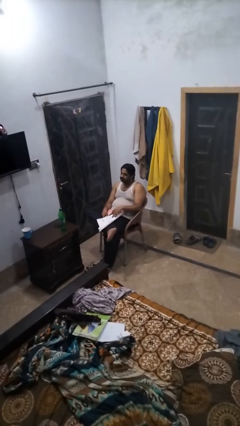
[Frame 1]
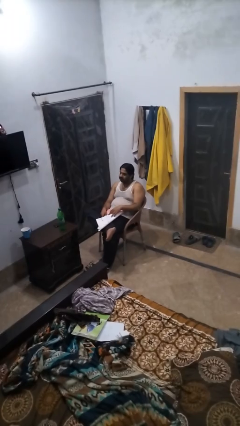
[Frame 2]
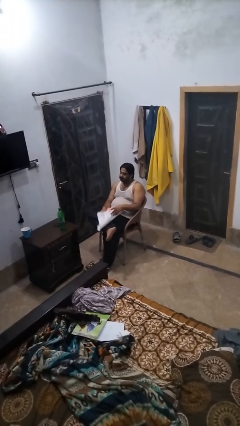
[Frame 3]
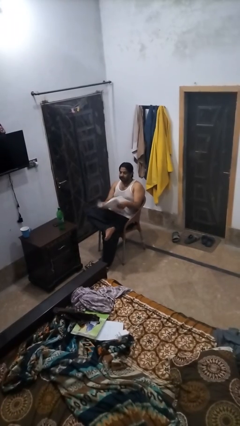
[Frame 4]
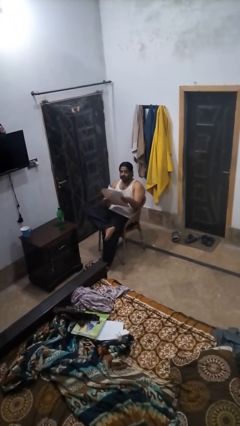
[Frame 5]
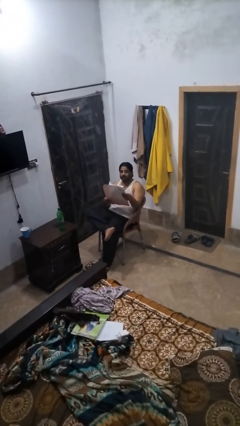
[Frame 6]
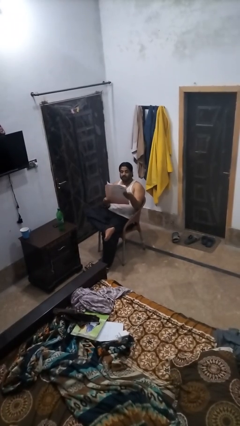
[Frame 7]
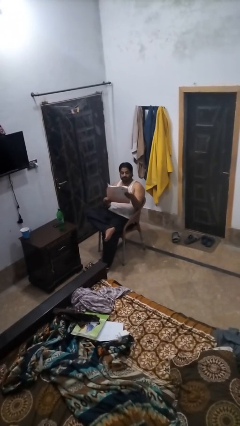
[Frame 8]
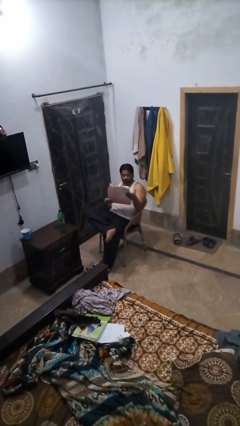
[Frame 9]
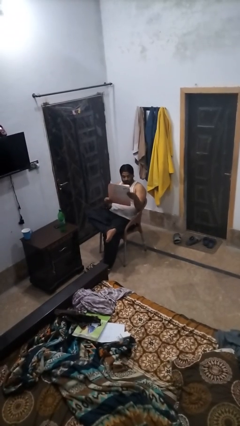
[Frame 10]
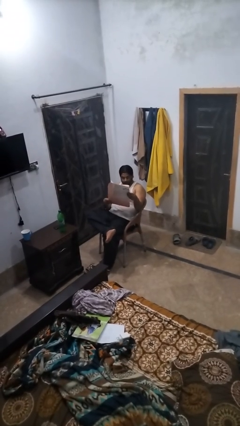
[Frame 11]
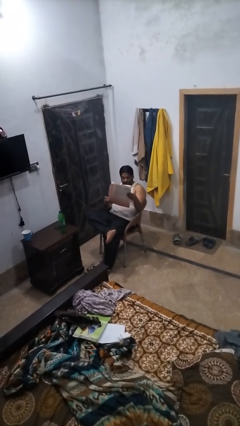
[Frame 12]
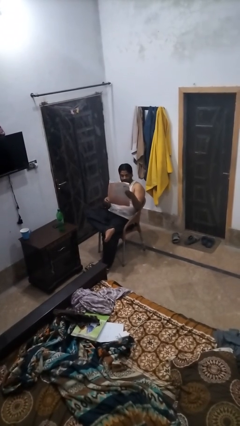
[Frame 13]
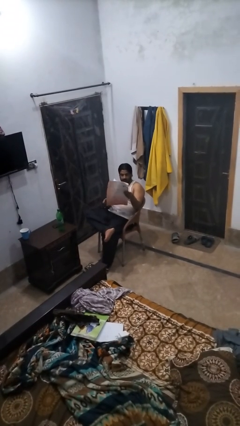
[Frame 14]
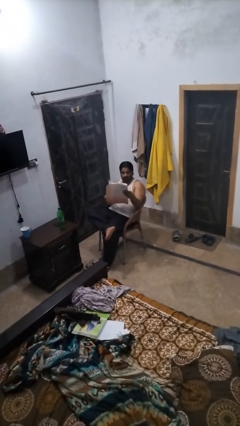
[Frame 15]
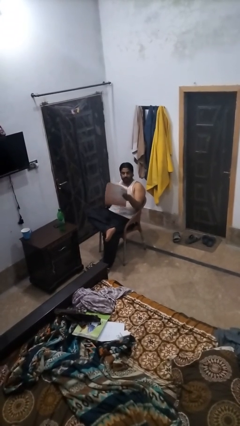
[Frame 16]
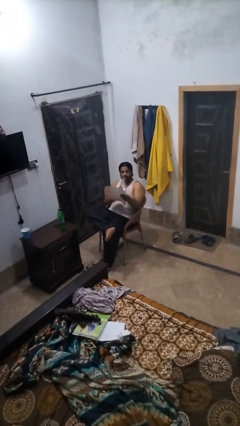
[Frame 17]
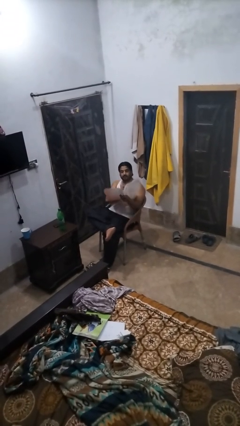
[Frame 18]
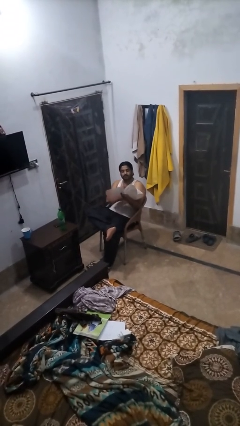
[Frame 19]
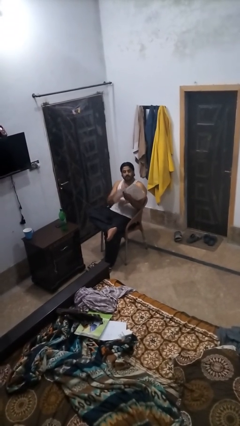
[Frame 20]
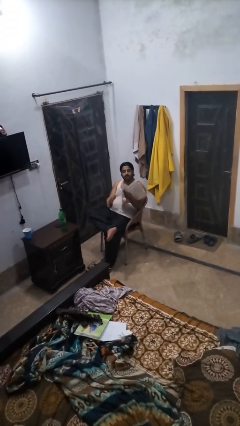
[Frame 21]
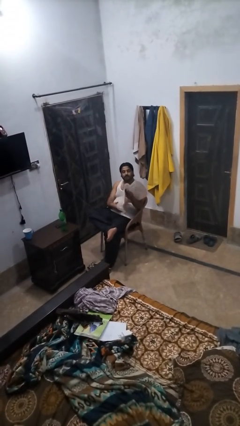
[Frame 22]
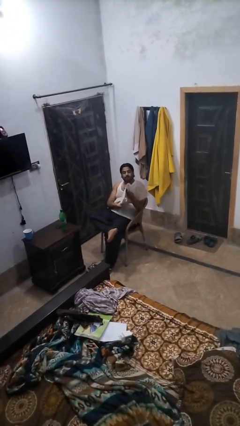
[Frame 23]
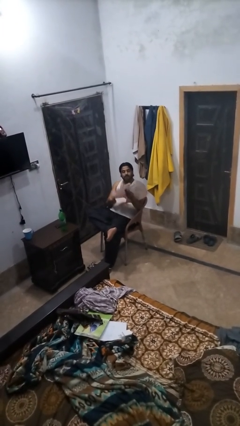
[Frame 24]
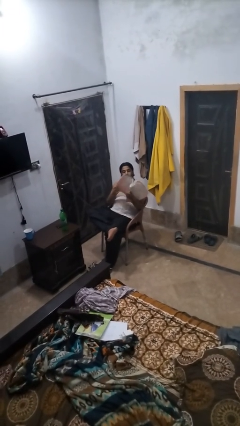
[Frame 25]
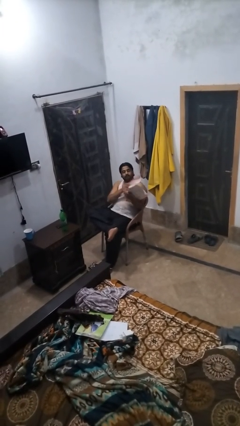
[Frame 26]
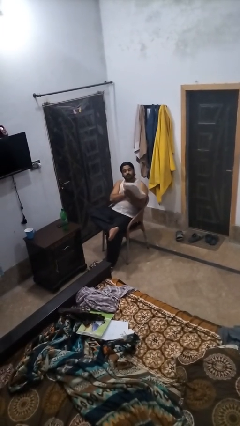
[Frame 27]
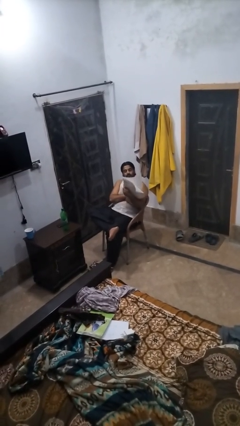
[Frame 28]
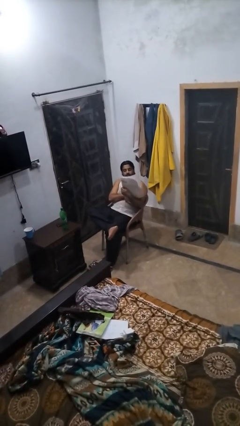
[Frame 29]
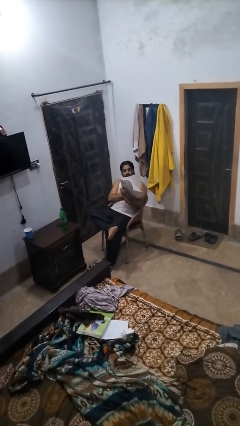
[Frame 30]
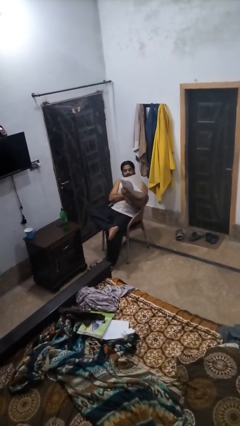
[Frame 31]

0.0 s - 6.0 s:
person reads newspaper

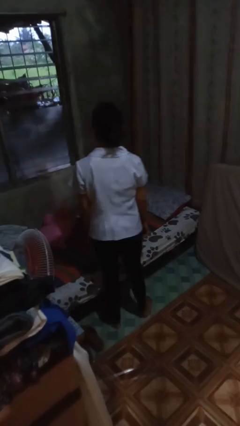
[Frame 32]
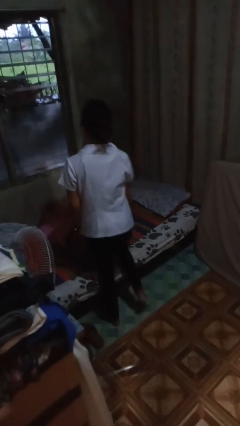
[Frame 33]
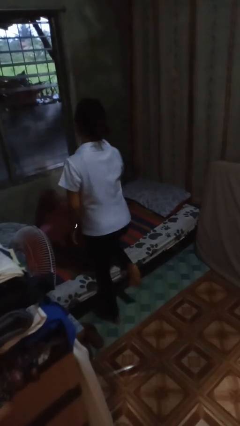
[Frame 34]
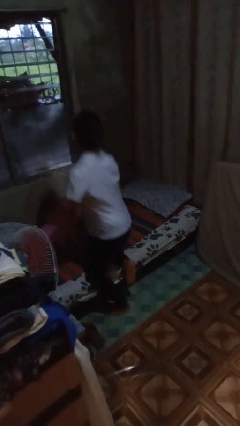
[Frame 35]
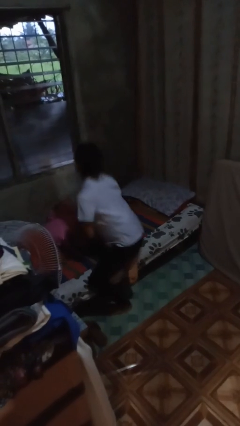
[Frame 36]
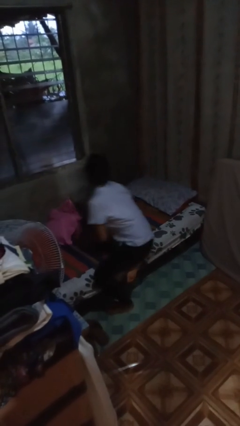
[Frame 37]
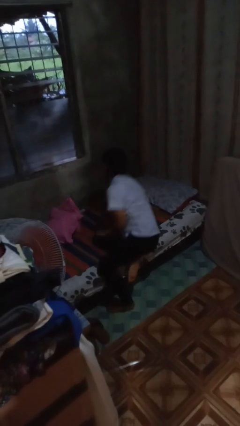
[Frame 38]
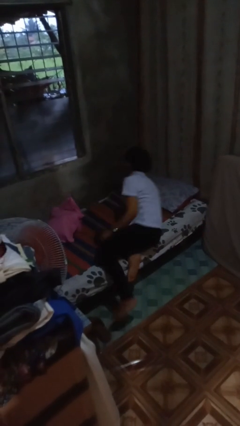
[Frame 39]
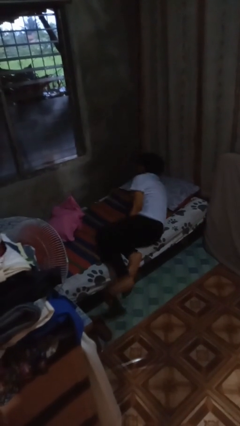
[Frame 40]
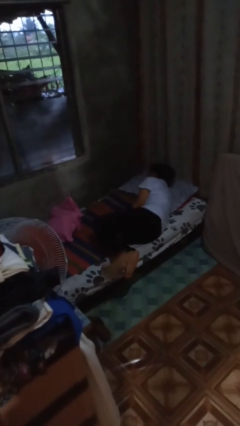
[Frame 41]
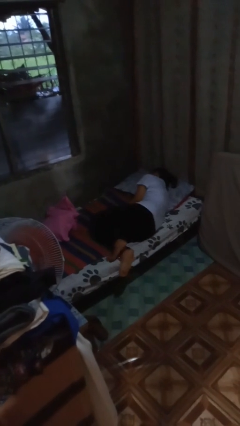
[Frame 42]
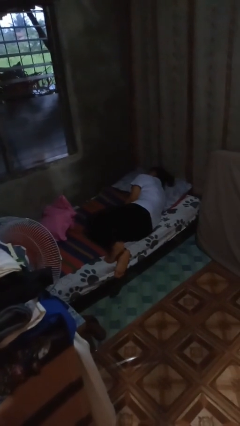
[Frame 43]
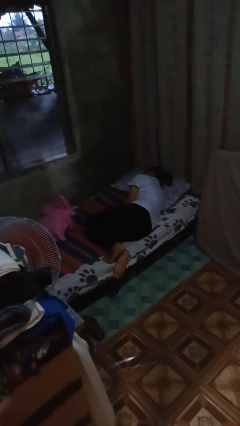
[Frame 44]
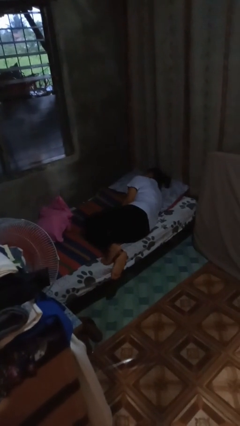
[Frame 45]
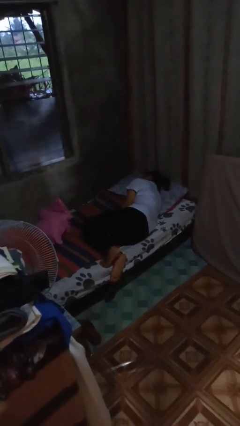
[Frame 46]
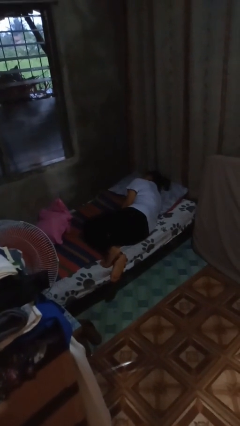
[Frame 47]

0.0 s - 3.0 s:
person lies down on bed

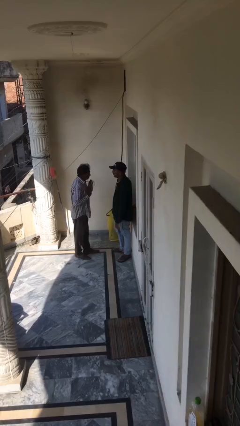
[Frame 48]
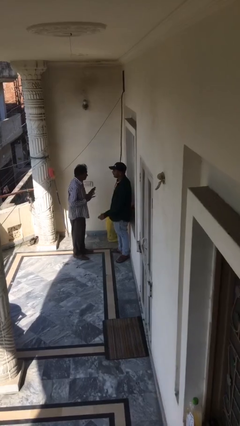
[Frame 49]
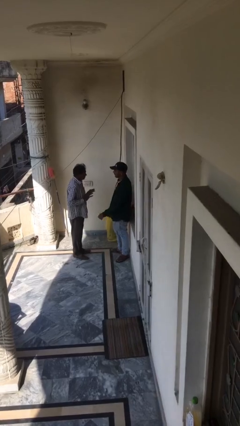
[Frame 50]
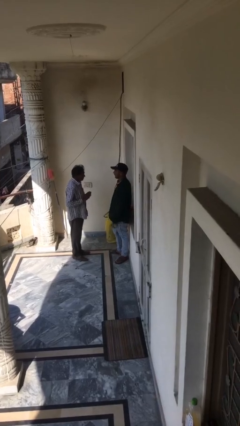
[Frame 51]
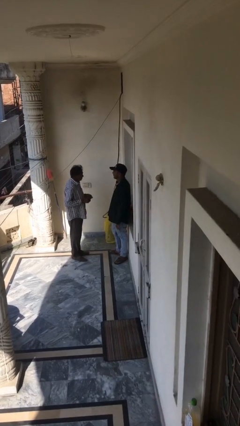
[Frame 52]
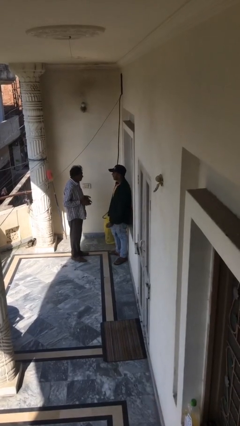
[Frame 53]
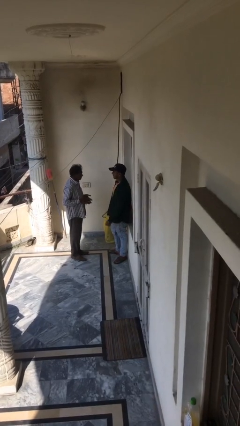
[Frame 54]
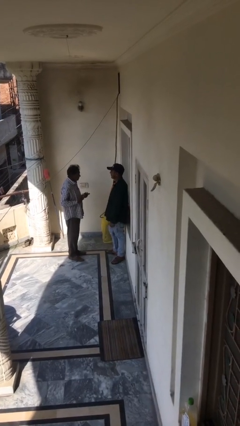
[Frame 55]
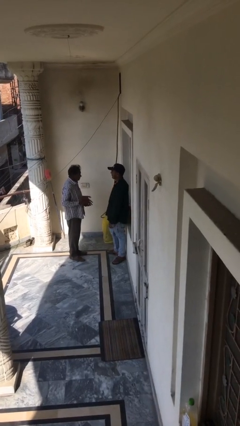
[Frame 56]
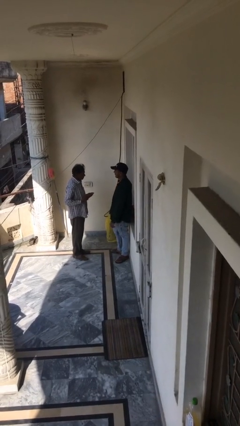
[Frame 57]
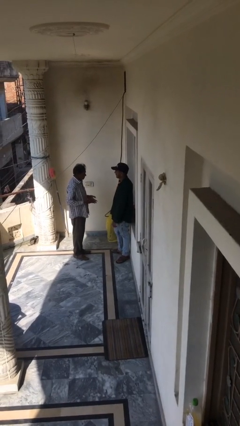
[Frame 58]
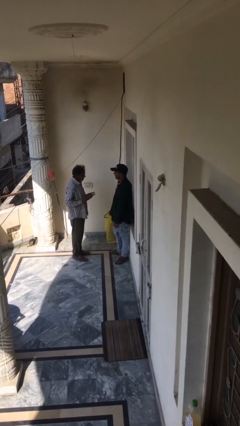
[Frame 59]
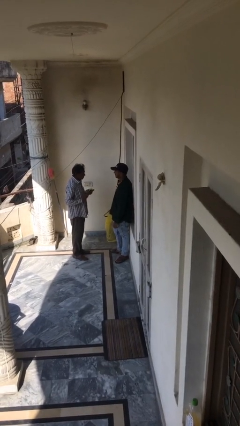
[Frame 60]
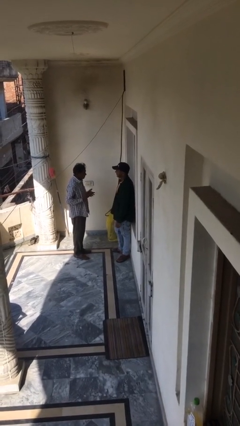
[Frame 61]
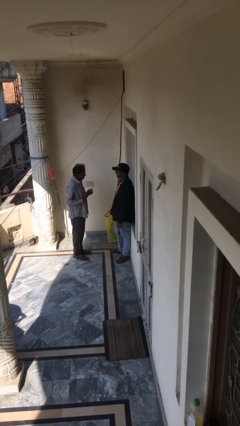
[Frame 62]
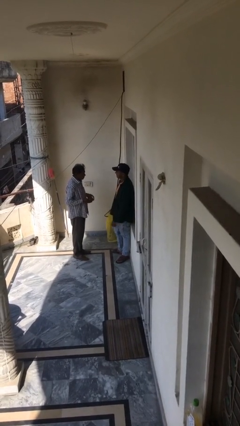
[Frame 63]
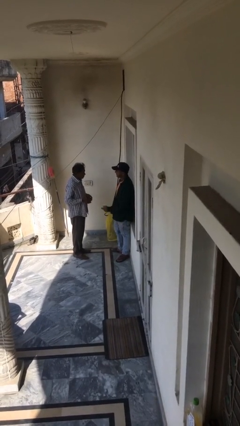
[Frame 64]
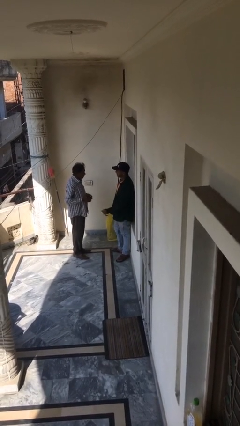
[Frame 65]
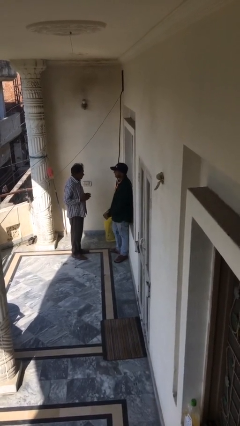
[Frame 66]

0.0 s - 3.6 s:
person talks to person

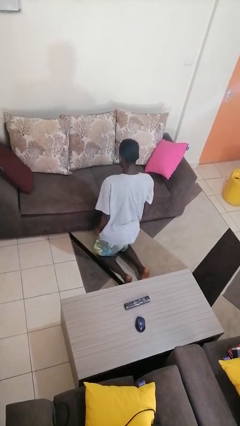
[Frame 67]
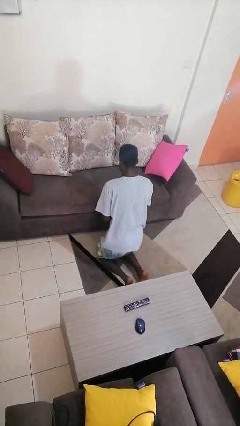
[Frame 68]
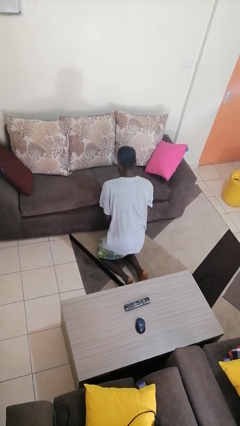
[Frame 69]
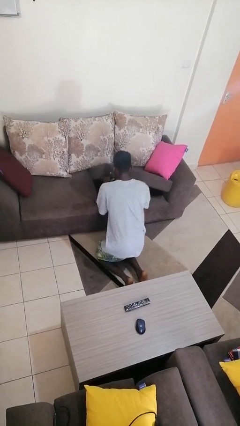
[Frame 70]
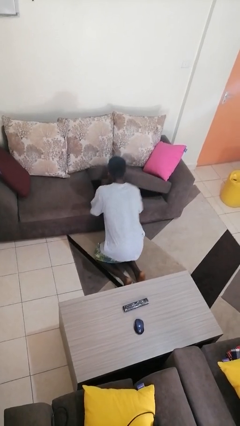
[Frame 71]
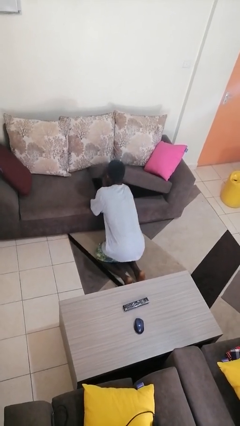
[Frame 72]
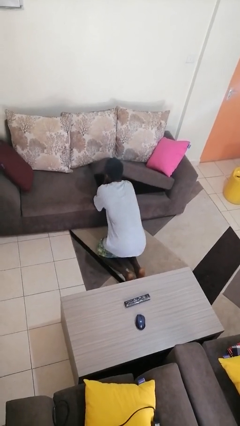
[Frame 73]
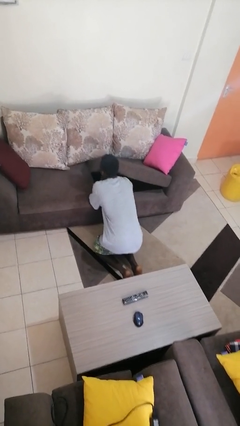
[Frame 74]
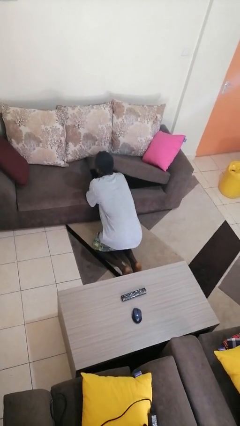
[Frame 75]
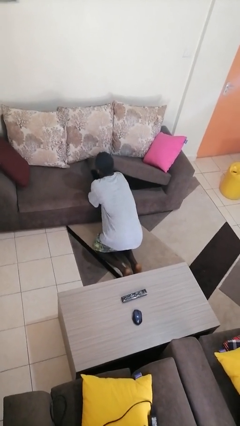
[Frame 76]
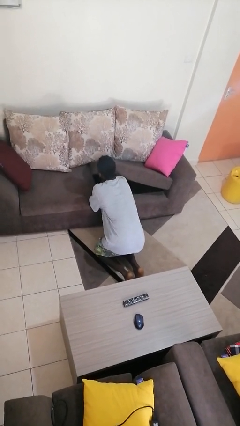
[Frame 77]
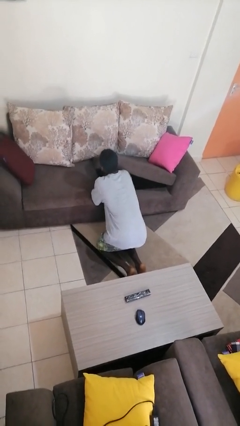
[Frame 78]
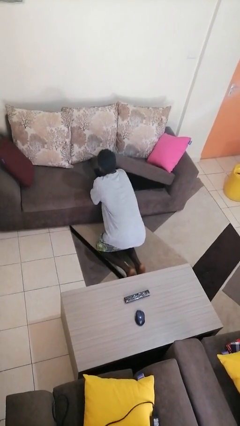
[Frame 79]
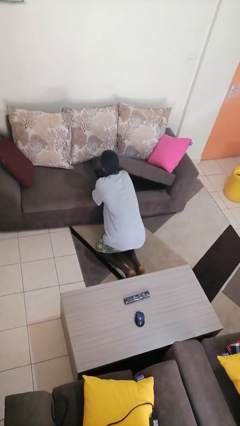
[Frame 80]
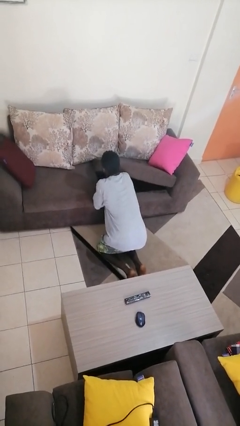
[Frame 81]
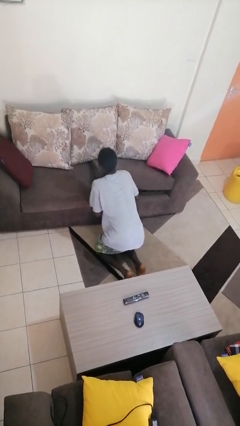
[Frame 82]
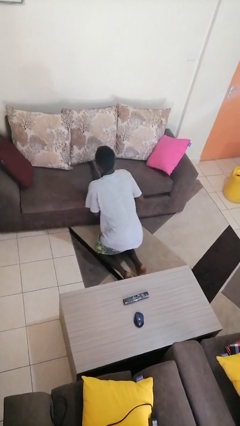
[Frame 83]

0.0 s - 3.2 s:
person searches under couch

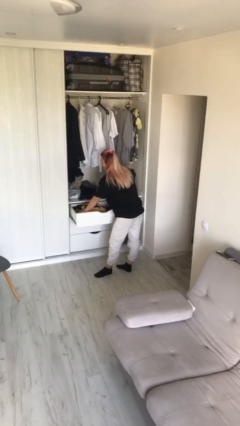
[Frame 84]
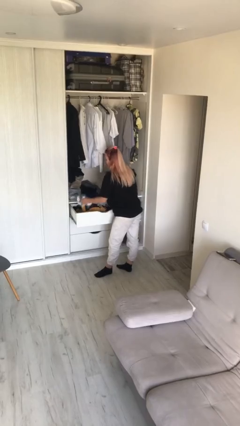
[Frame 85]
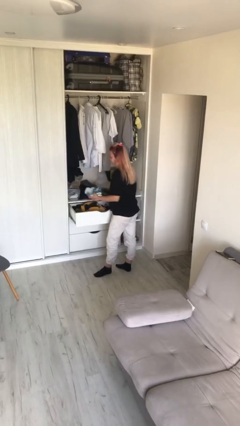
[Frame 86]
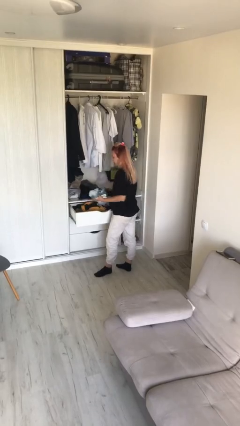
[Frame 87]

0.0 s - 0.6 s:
person takes clothes from dresser

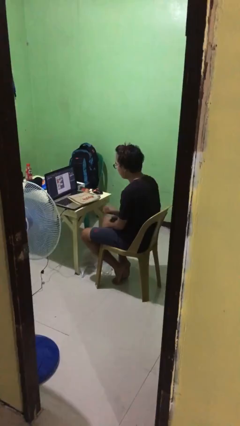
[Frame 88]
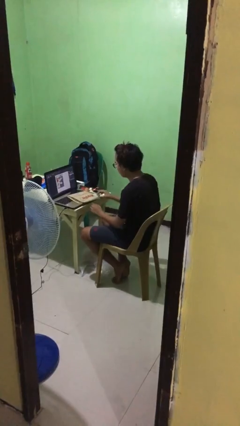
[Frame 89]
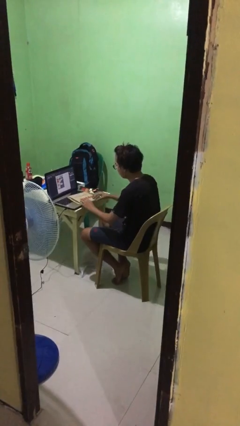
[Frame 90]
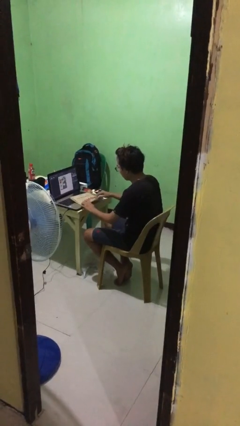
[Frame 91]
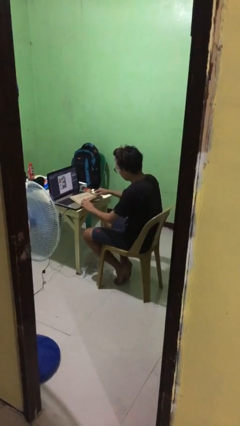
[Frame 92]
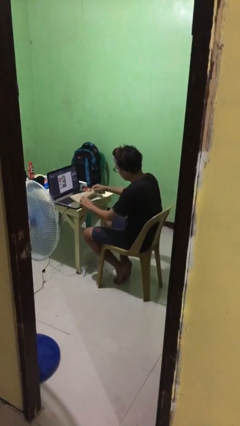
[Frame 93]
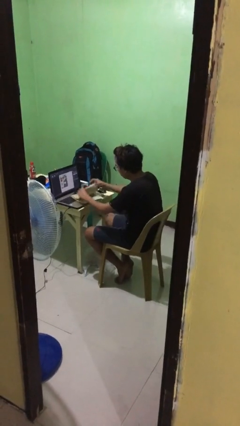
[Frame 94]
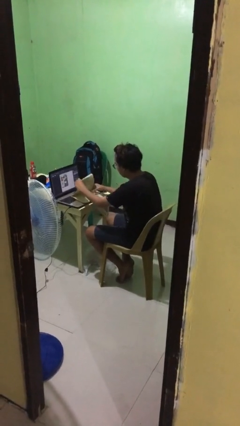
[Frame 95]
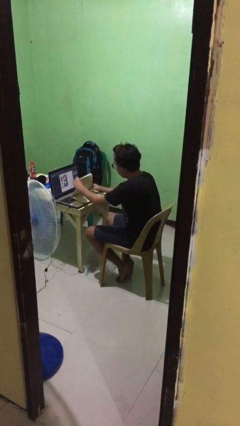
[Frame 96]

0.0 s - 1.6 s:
person picks up object from table
